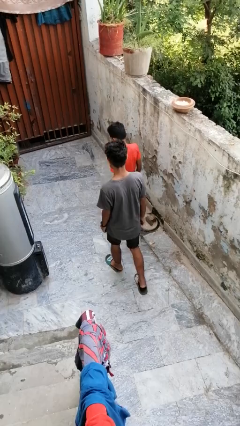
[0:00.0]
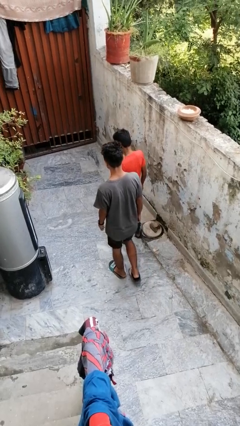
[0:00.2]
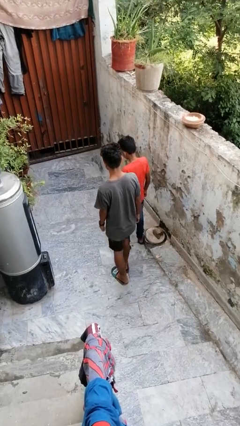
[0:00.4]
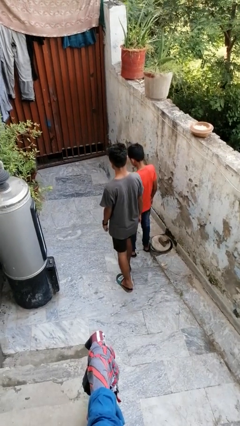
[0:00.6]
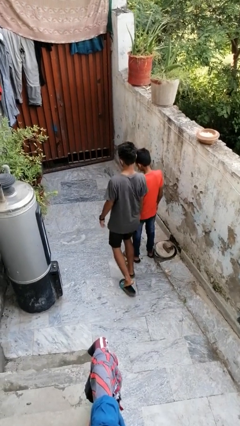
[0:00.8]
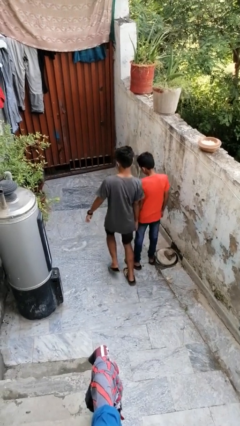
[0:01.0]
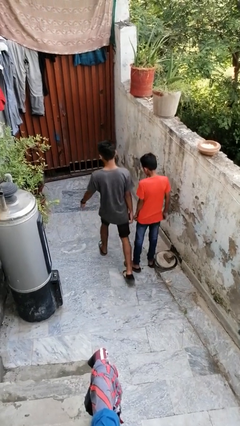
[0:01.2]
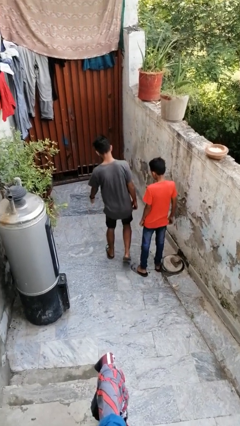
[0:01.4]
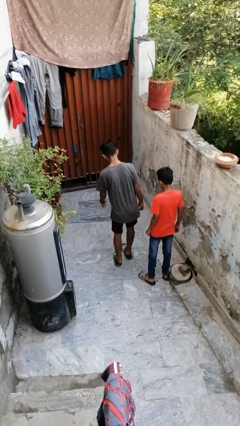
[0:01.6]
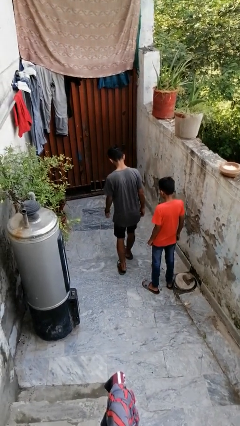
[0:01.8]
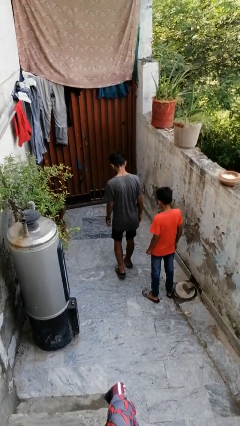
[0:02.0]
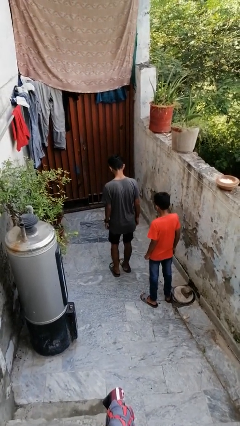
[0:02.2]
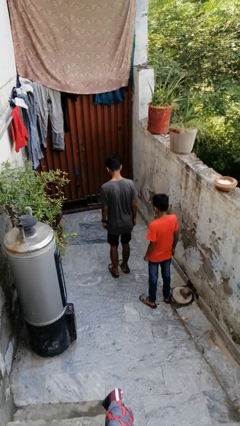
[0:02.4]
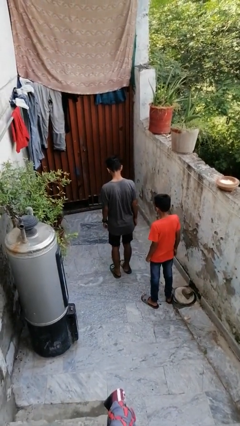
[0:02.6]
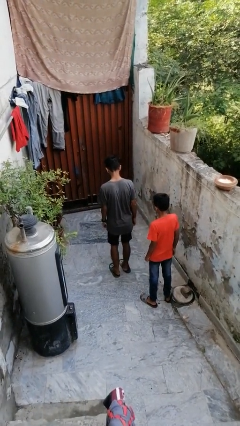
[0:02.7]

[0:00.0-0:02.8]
person bumps into person

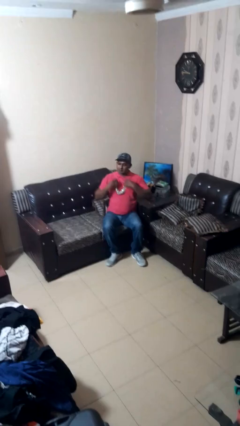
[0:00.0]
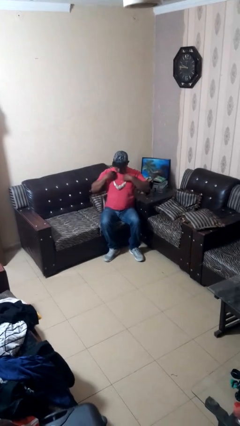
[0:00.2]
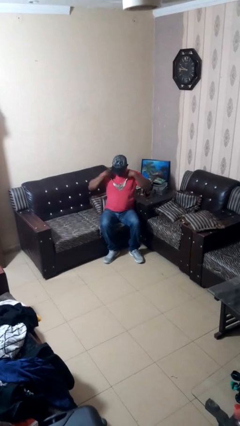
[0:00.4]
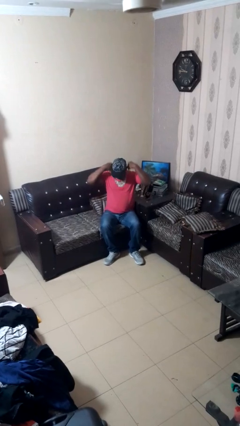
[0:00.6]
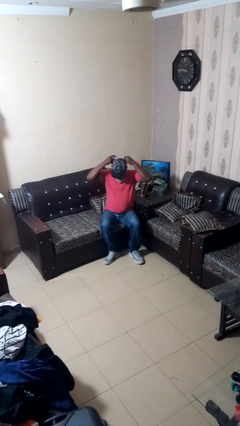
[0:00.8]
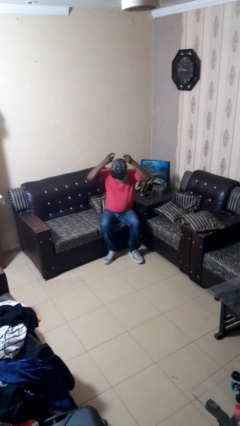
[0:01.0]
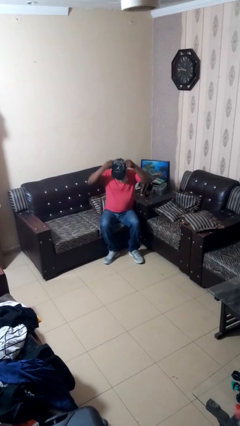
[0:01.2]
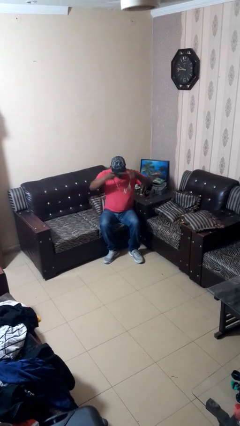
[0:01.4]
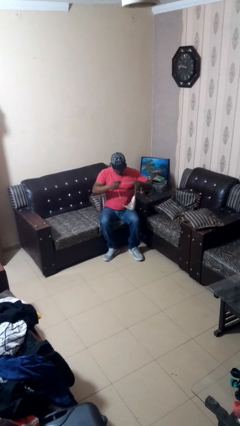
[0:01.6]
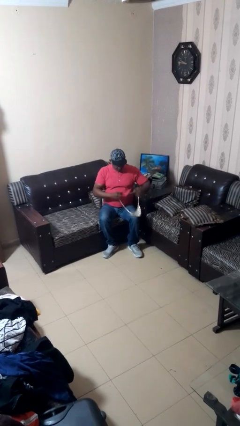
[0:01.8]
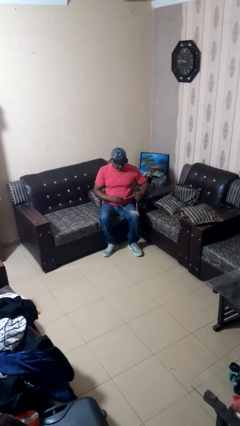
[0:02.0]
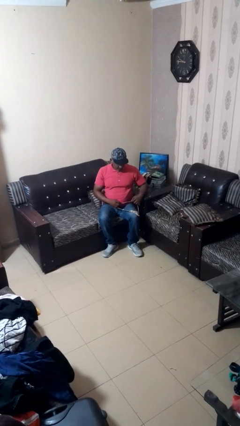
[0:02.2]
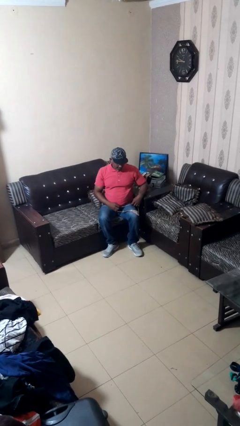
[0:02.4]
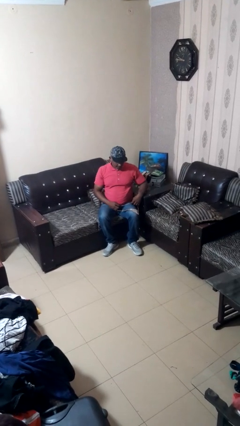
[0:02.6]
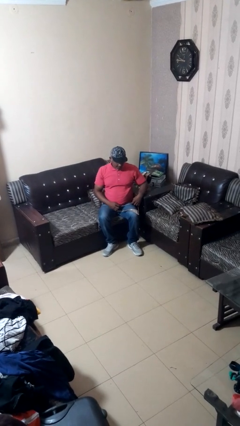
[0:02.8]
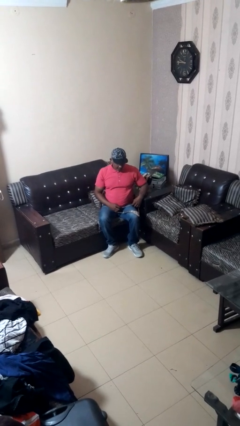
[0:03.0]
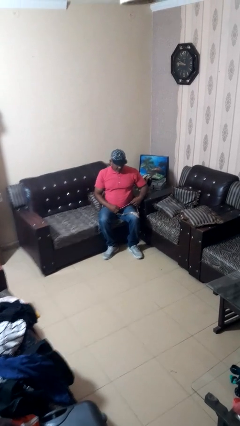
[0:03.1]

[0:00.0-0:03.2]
person takes off necklace

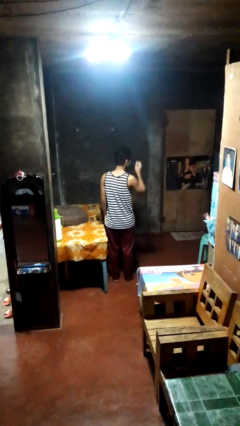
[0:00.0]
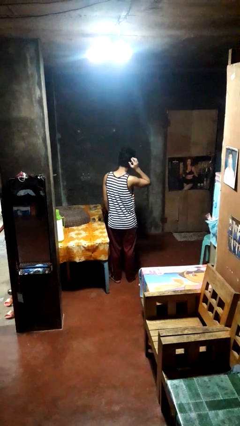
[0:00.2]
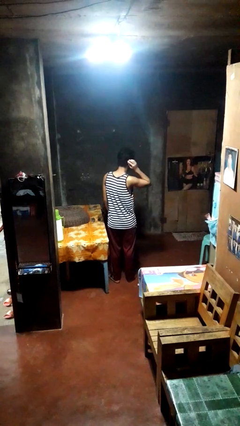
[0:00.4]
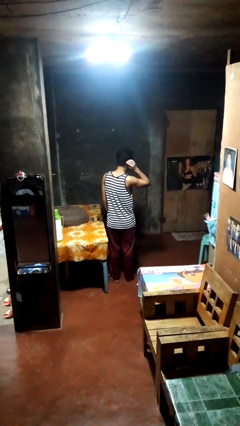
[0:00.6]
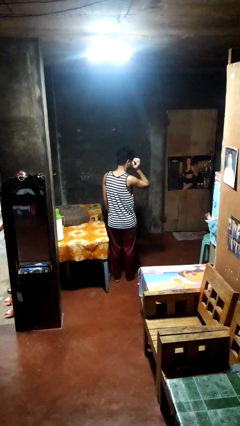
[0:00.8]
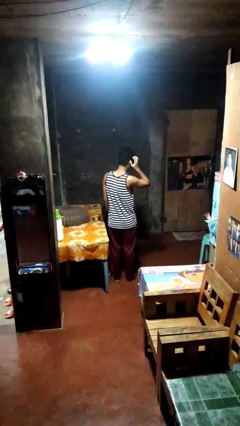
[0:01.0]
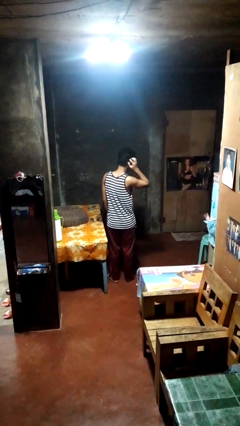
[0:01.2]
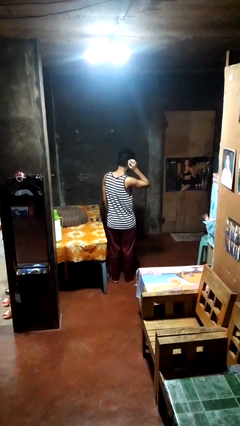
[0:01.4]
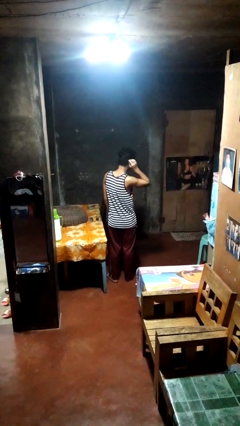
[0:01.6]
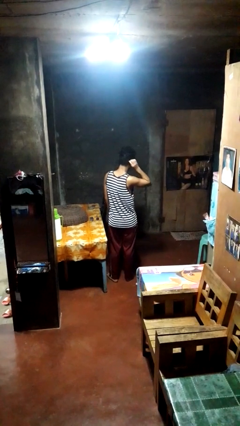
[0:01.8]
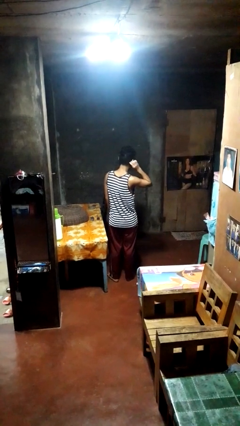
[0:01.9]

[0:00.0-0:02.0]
person strokes hair

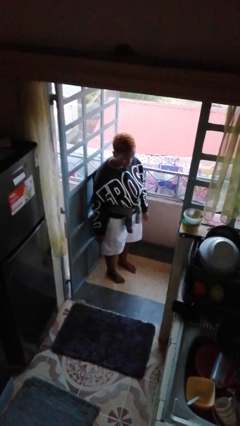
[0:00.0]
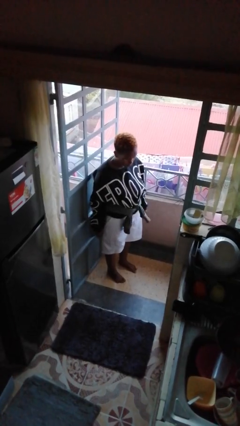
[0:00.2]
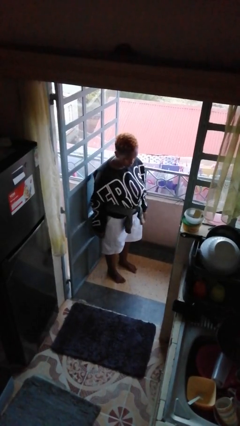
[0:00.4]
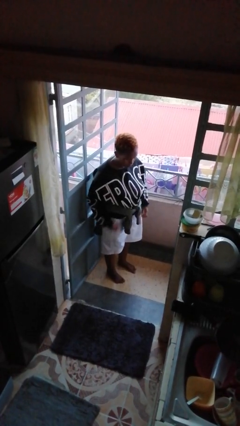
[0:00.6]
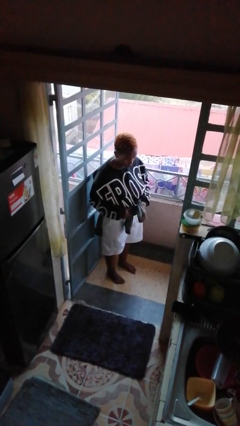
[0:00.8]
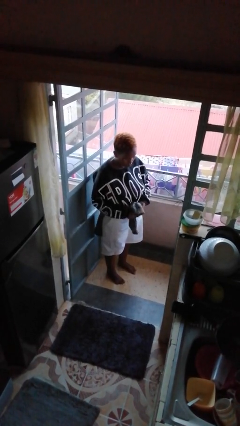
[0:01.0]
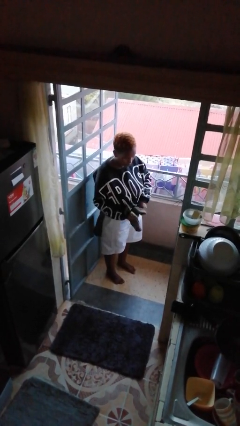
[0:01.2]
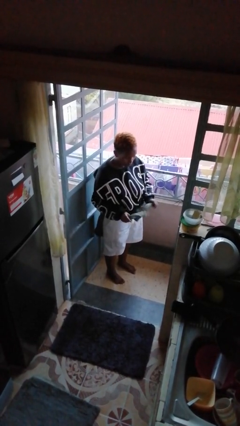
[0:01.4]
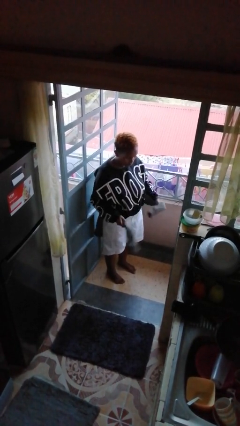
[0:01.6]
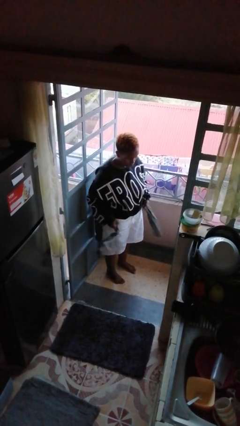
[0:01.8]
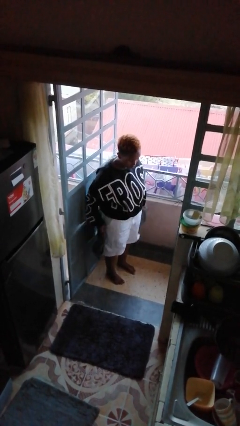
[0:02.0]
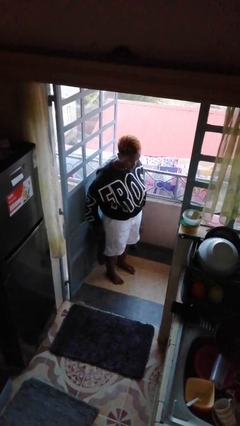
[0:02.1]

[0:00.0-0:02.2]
person unties jacket around waist

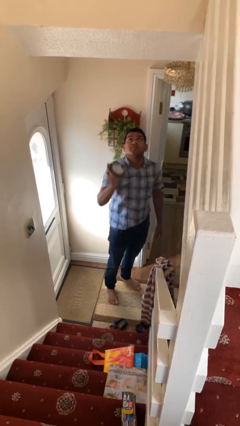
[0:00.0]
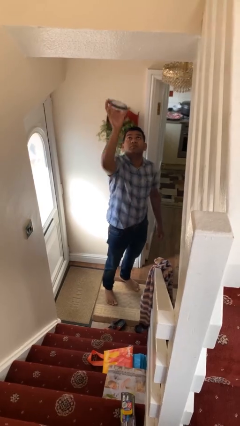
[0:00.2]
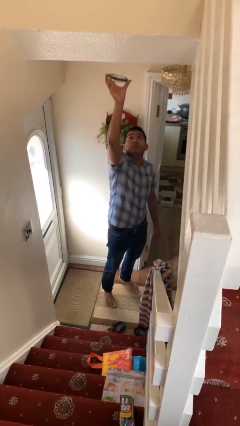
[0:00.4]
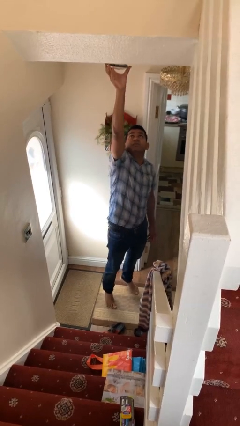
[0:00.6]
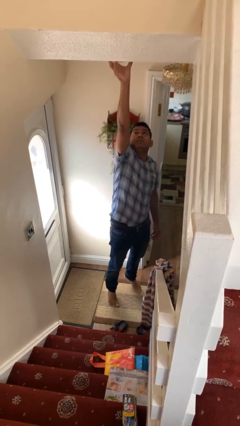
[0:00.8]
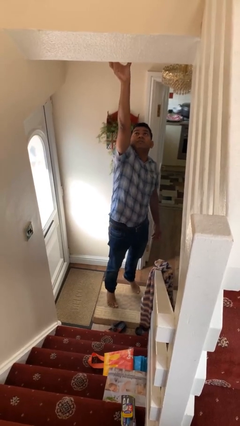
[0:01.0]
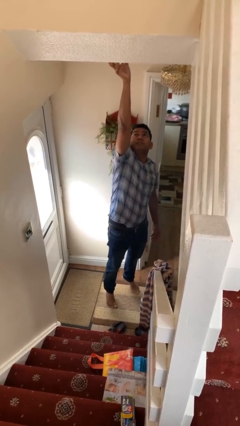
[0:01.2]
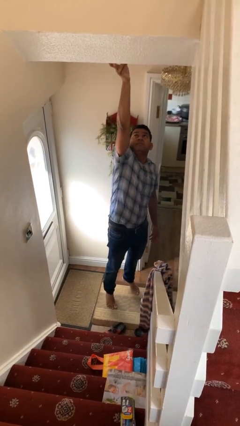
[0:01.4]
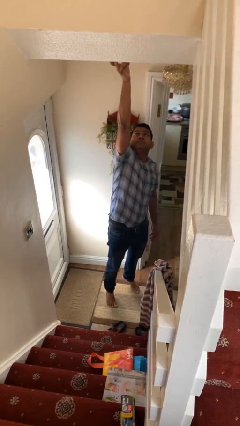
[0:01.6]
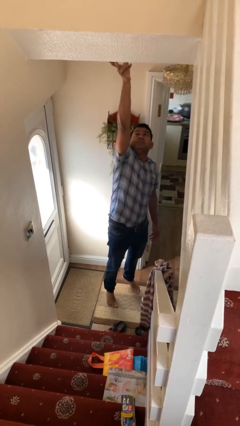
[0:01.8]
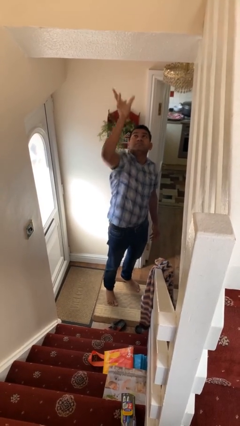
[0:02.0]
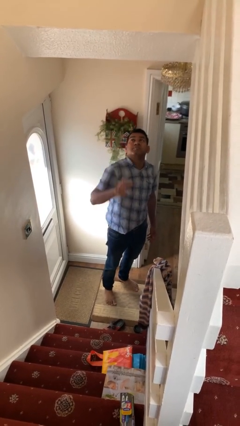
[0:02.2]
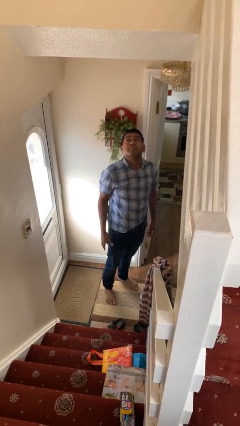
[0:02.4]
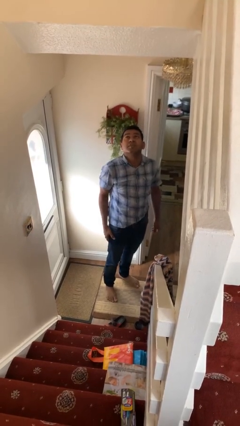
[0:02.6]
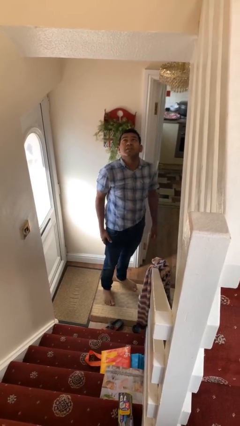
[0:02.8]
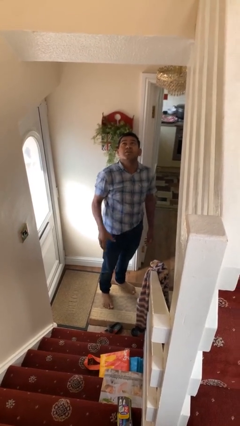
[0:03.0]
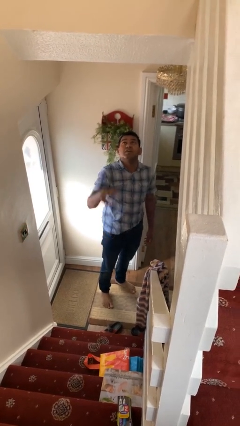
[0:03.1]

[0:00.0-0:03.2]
person puts up smoke detector

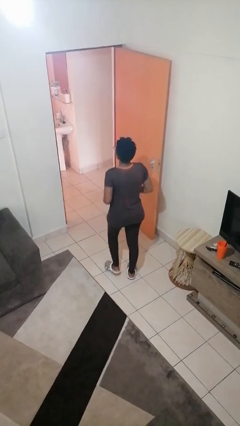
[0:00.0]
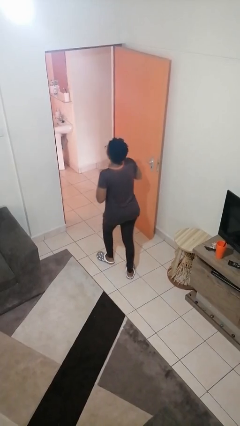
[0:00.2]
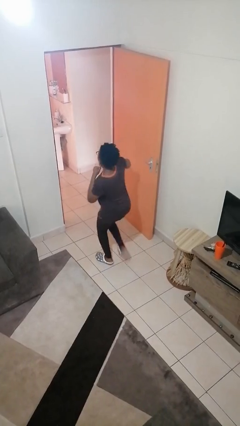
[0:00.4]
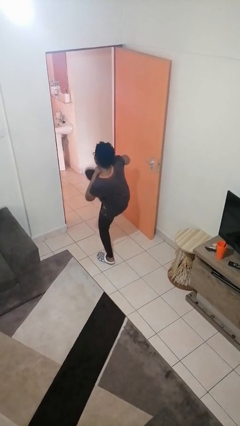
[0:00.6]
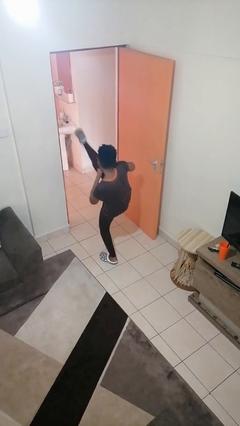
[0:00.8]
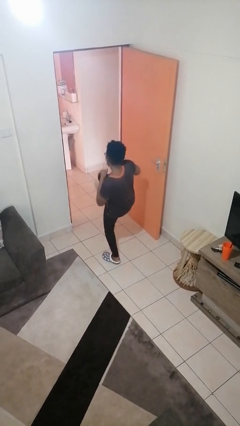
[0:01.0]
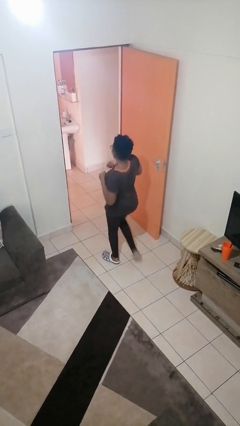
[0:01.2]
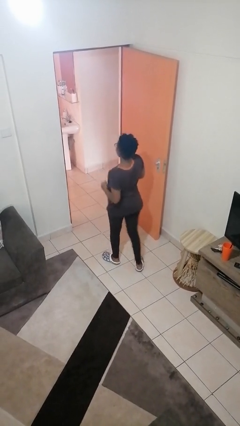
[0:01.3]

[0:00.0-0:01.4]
person karate kicks

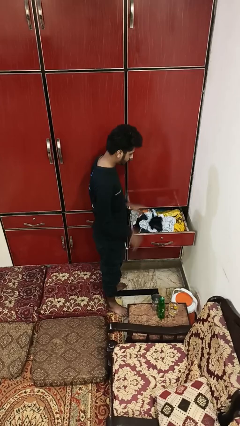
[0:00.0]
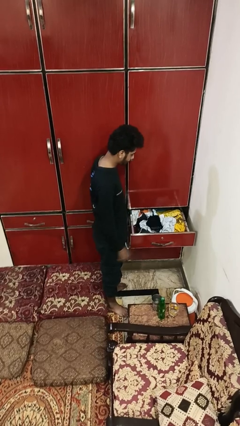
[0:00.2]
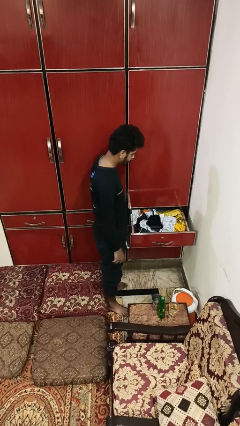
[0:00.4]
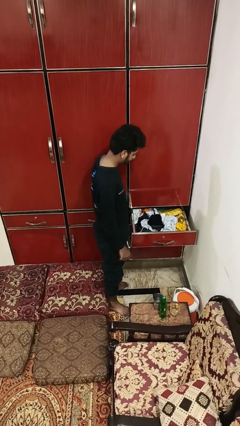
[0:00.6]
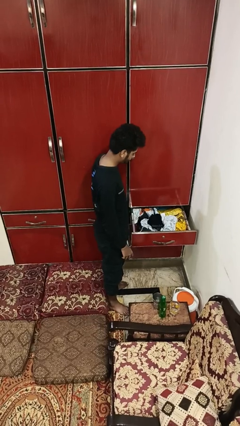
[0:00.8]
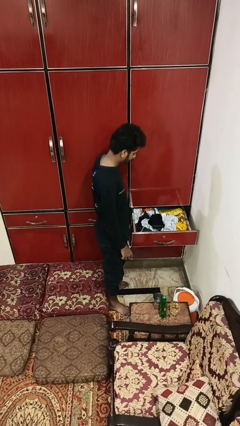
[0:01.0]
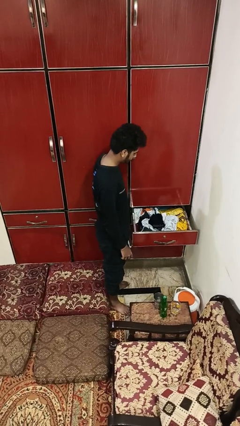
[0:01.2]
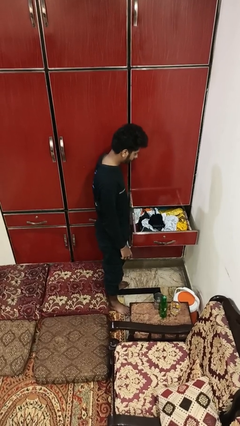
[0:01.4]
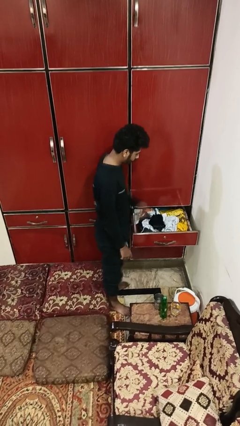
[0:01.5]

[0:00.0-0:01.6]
person puts clothes into dresser

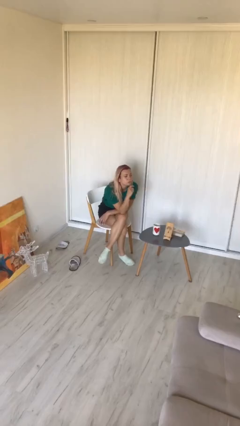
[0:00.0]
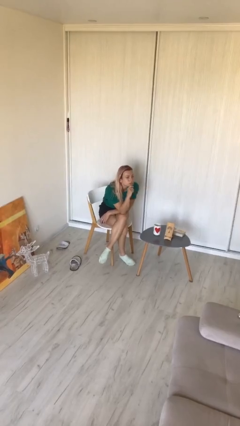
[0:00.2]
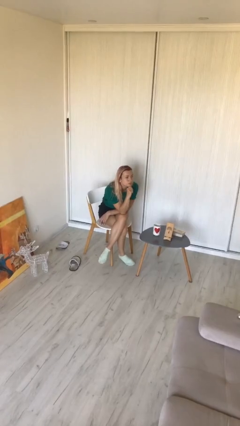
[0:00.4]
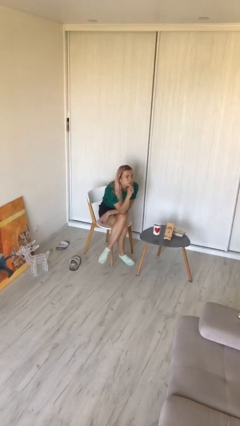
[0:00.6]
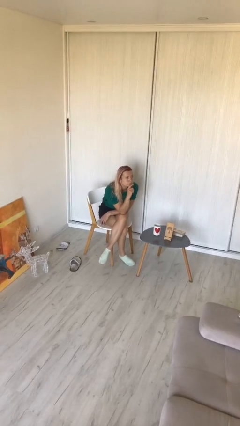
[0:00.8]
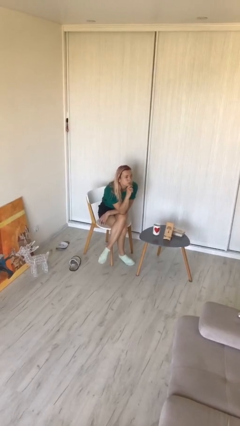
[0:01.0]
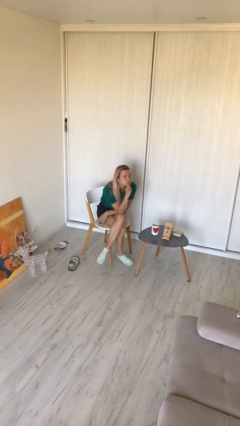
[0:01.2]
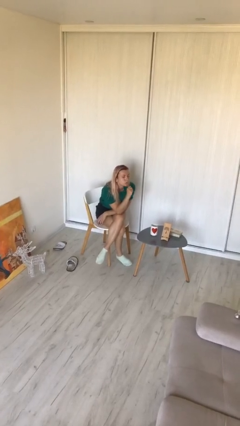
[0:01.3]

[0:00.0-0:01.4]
person strokes chin
